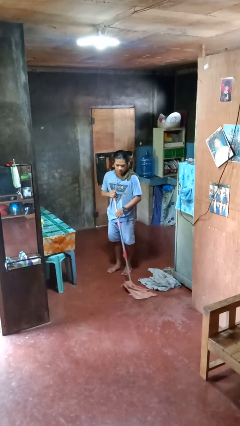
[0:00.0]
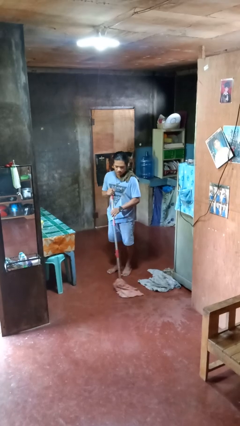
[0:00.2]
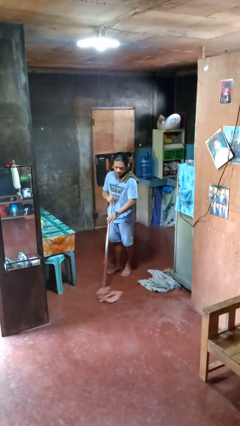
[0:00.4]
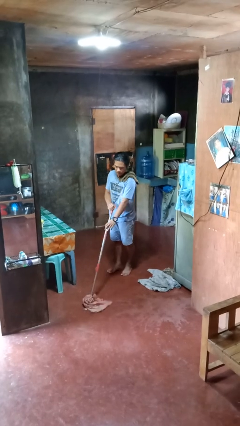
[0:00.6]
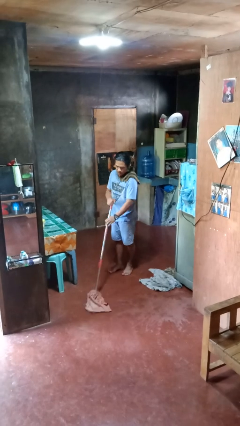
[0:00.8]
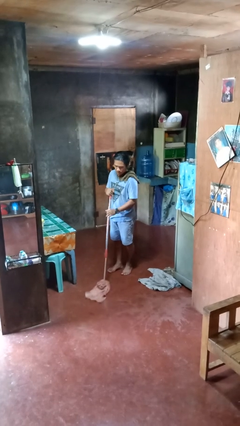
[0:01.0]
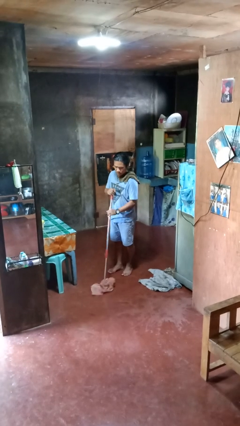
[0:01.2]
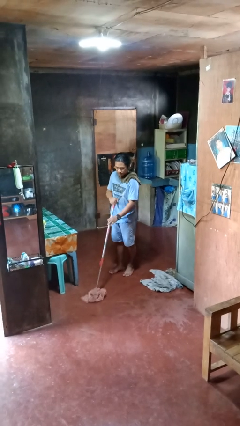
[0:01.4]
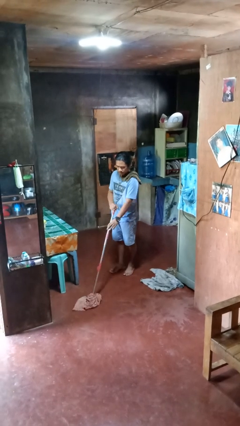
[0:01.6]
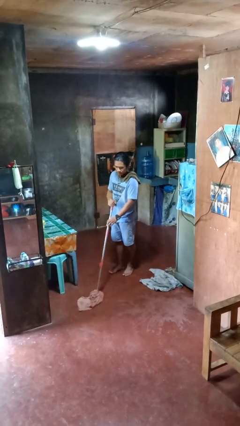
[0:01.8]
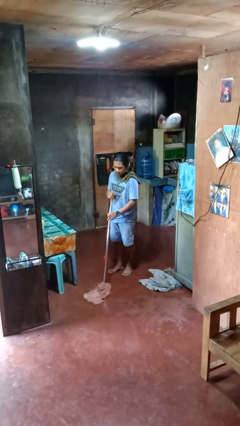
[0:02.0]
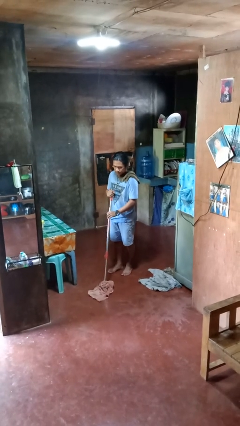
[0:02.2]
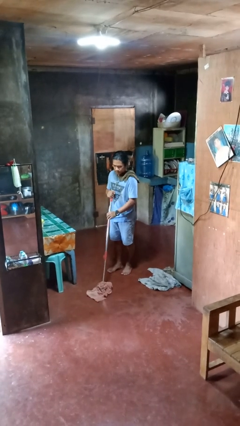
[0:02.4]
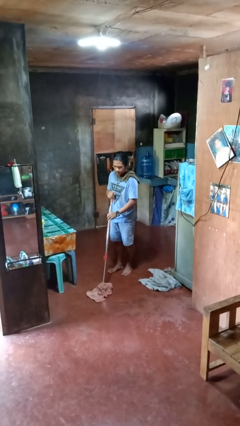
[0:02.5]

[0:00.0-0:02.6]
person mops

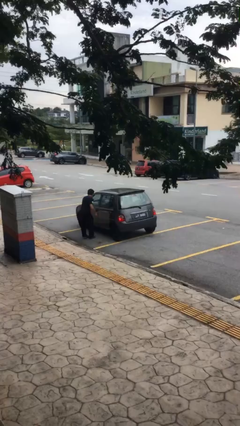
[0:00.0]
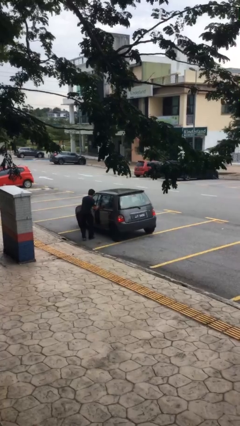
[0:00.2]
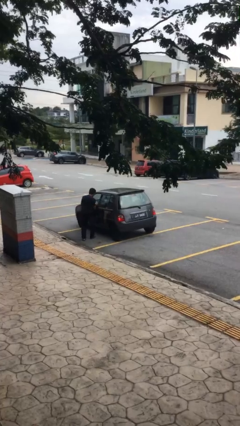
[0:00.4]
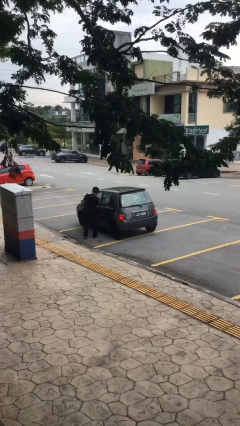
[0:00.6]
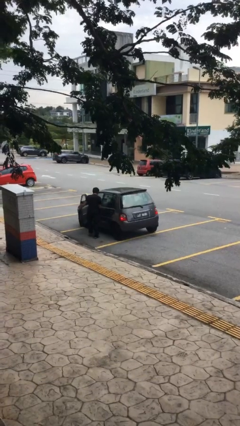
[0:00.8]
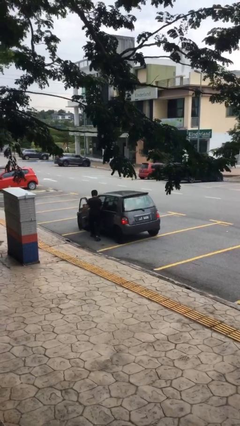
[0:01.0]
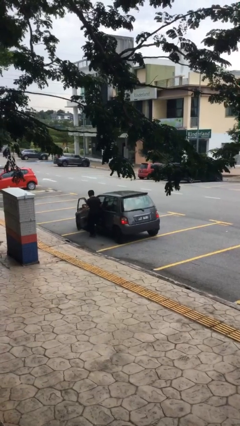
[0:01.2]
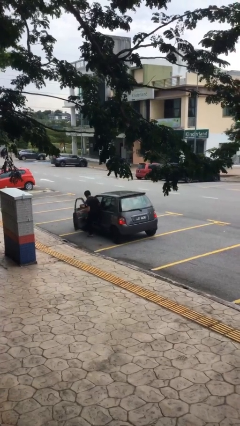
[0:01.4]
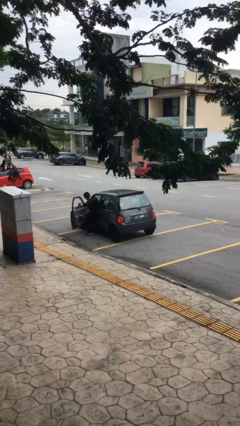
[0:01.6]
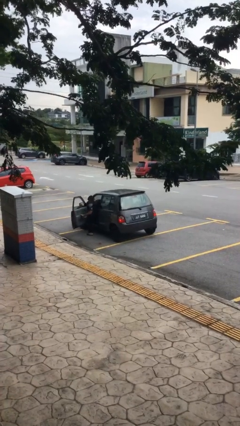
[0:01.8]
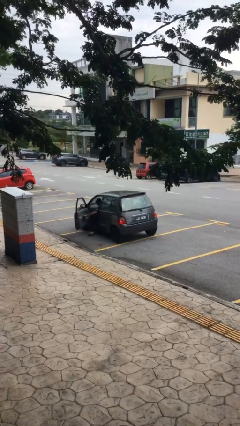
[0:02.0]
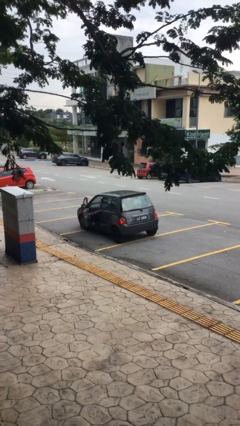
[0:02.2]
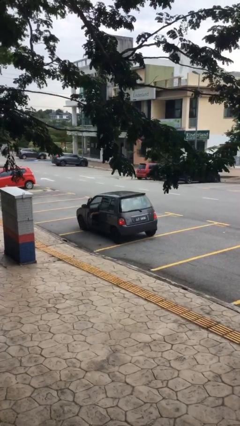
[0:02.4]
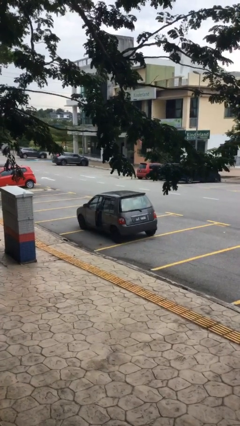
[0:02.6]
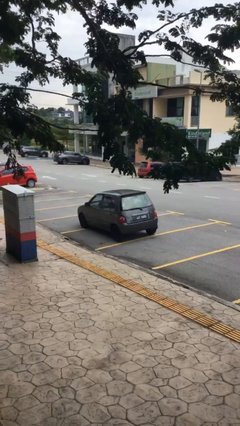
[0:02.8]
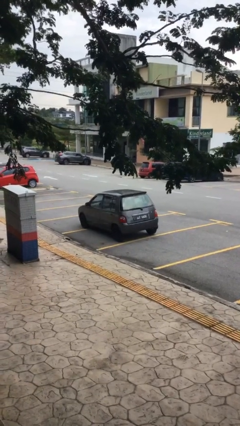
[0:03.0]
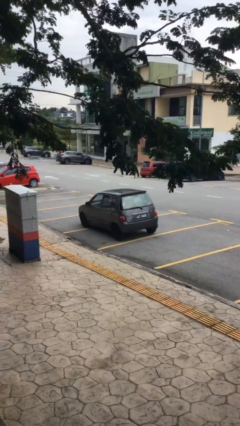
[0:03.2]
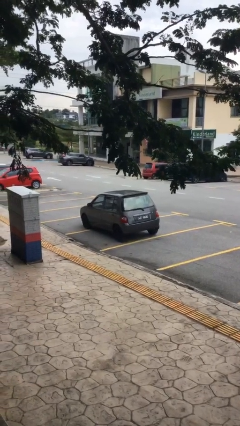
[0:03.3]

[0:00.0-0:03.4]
car picks up person

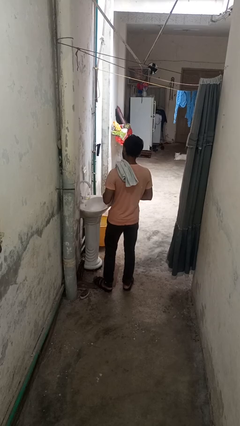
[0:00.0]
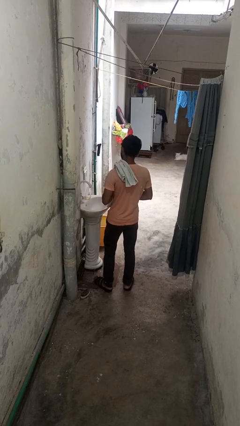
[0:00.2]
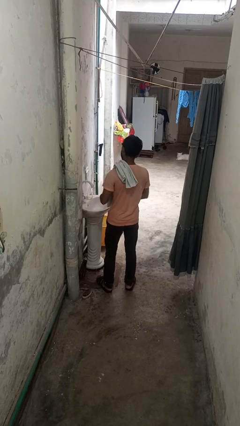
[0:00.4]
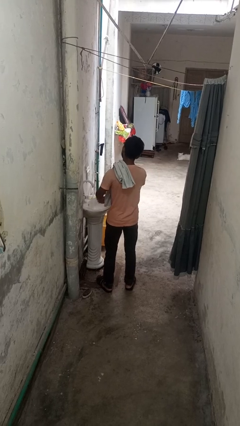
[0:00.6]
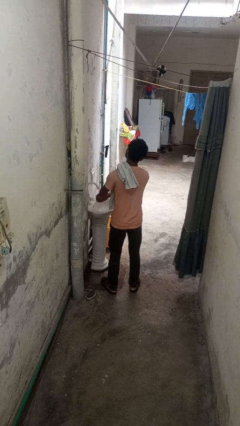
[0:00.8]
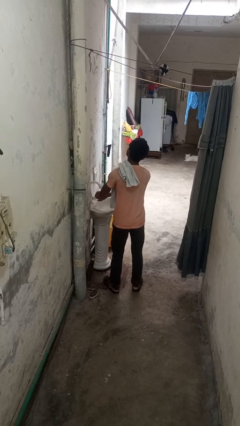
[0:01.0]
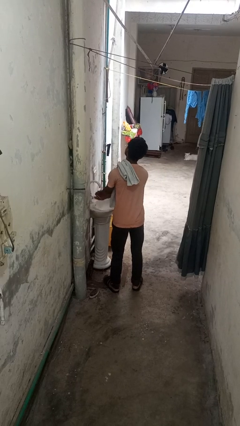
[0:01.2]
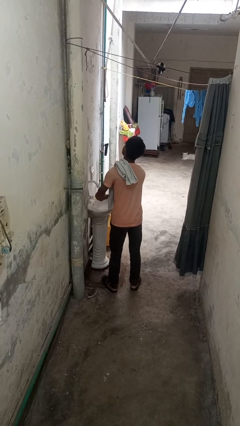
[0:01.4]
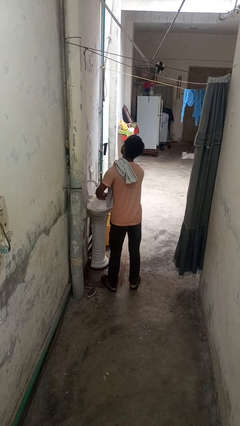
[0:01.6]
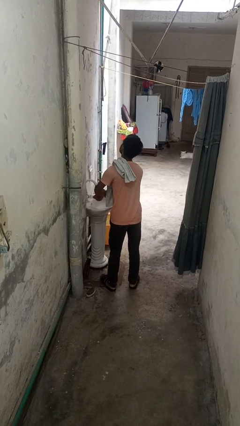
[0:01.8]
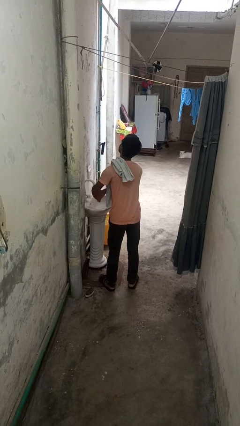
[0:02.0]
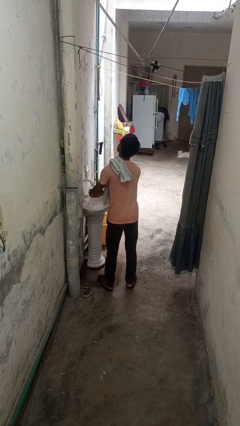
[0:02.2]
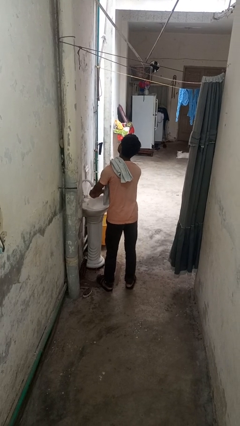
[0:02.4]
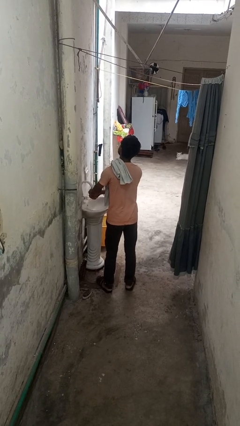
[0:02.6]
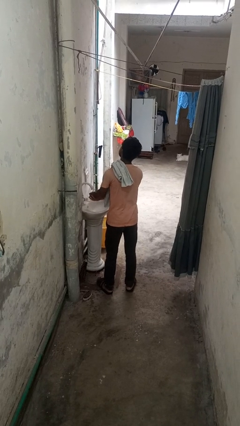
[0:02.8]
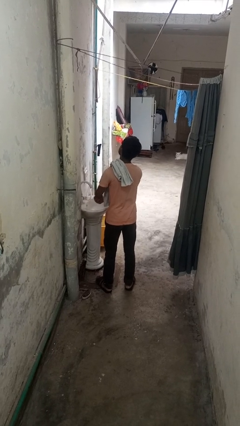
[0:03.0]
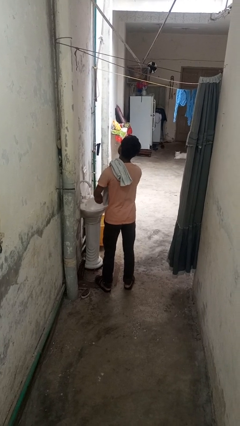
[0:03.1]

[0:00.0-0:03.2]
person washes hands

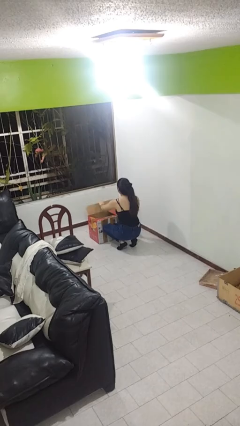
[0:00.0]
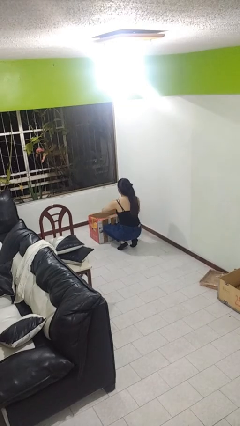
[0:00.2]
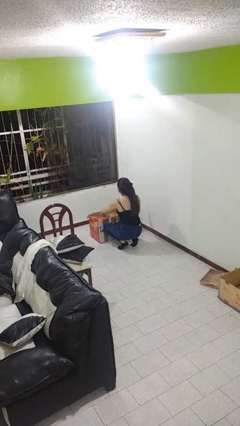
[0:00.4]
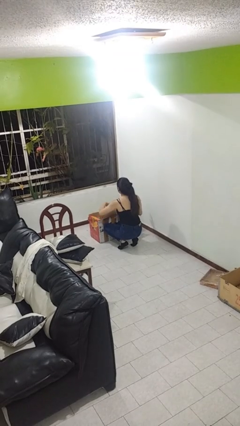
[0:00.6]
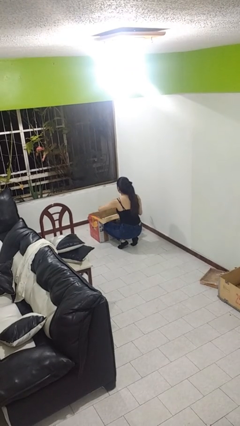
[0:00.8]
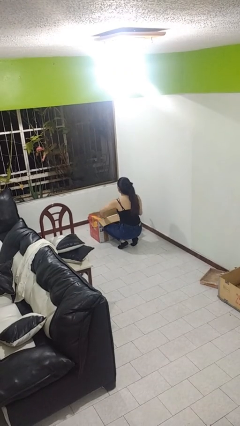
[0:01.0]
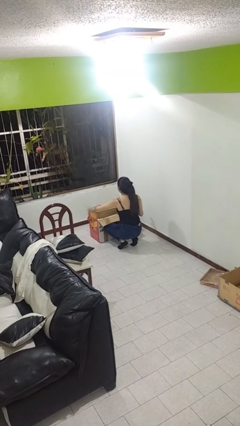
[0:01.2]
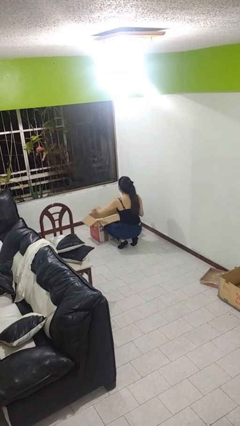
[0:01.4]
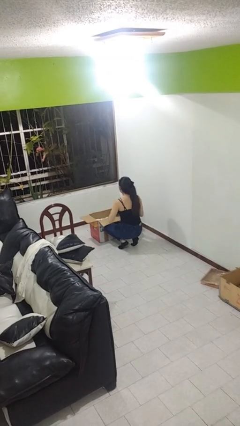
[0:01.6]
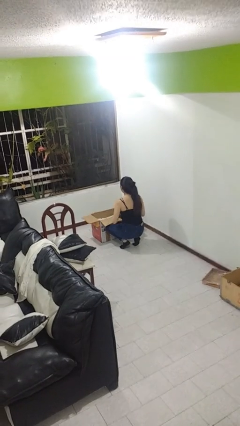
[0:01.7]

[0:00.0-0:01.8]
person opens box

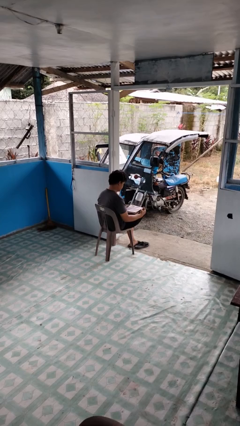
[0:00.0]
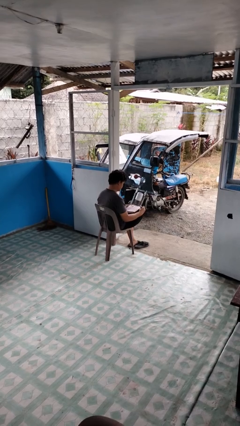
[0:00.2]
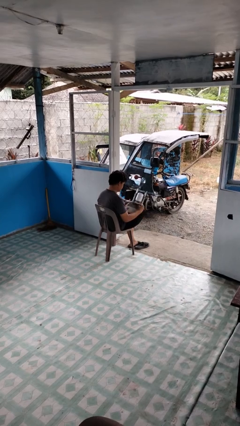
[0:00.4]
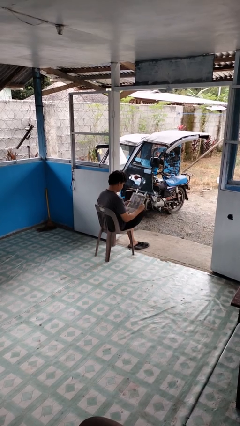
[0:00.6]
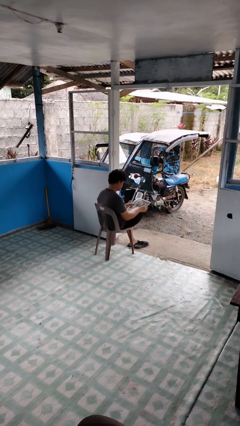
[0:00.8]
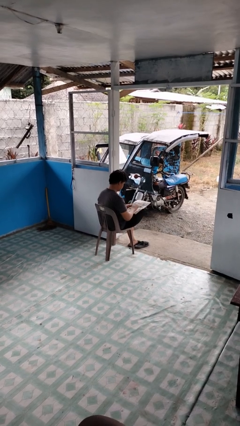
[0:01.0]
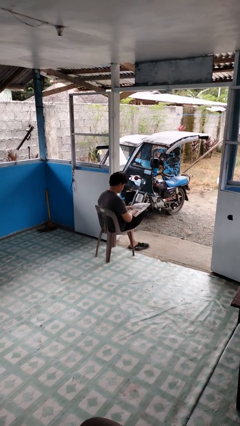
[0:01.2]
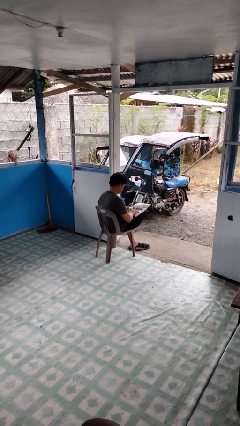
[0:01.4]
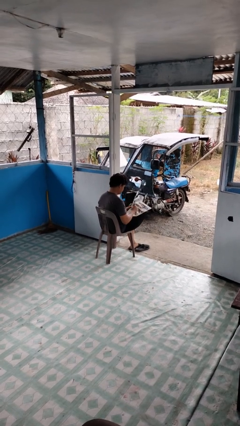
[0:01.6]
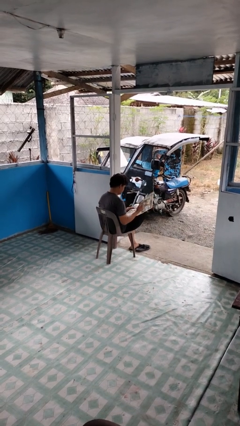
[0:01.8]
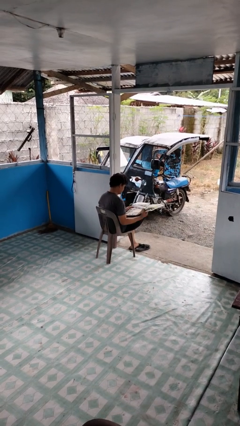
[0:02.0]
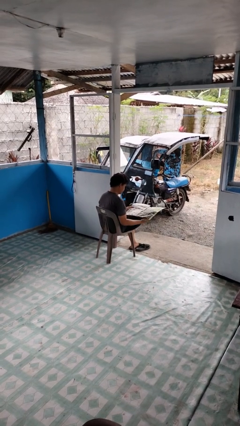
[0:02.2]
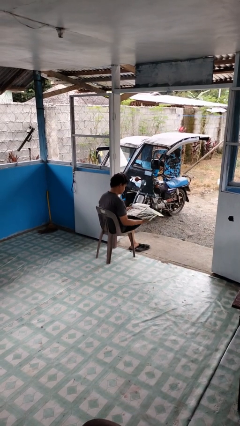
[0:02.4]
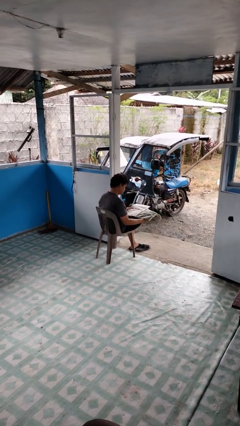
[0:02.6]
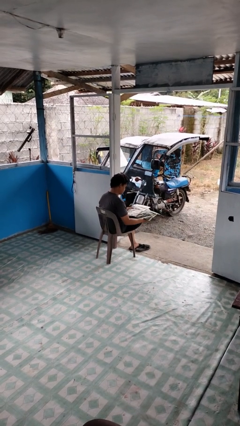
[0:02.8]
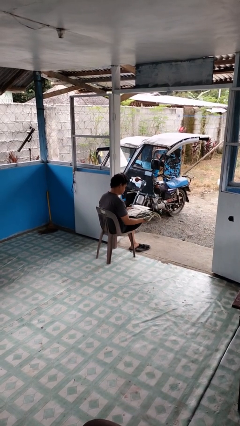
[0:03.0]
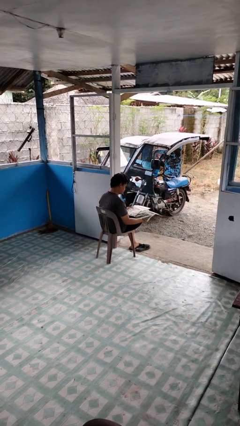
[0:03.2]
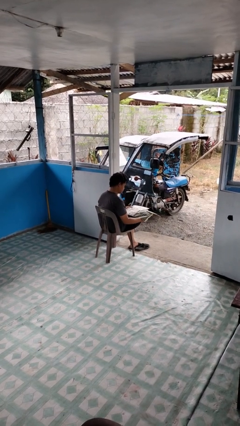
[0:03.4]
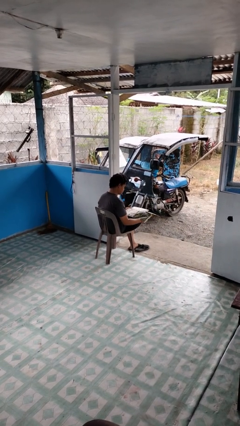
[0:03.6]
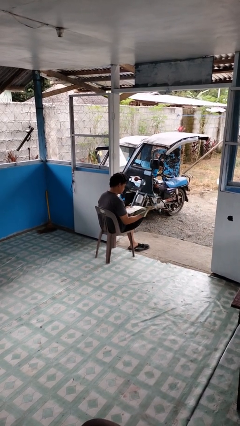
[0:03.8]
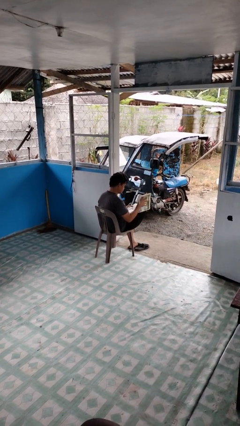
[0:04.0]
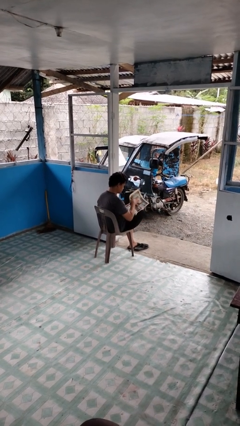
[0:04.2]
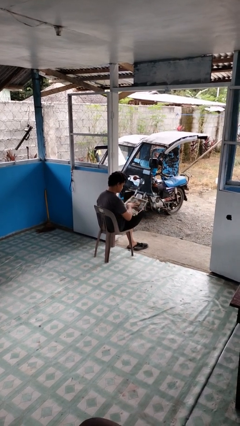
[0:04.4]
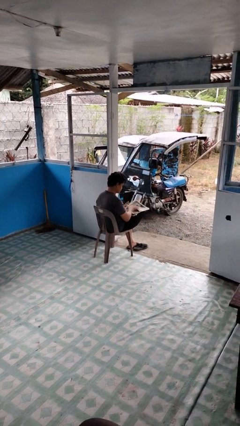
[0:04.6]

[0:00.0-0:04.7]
person reads newspaper

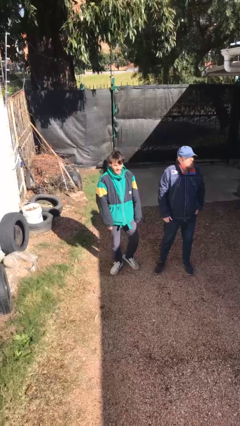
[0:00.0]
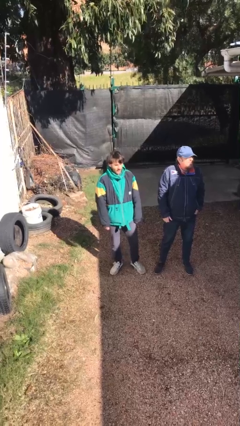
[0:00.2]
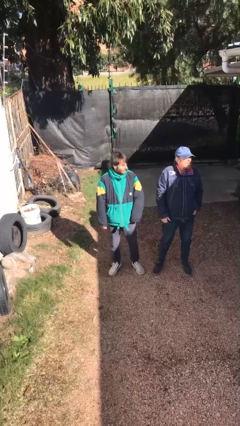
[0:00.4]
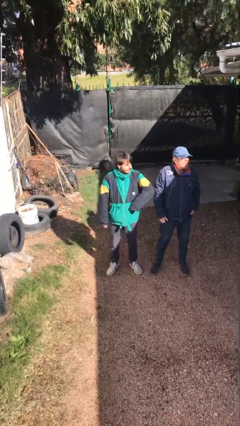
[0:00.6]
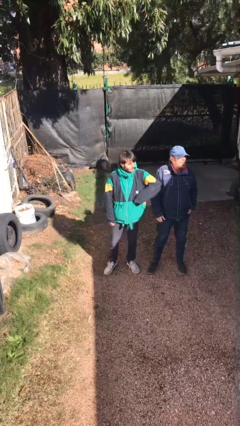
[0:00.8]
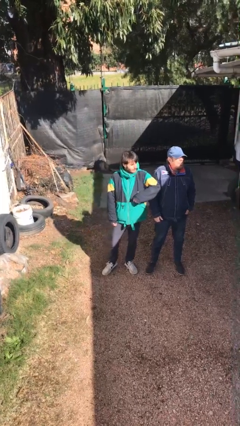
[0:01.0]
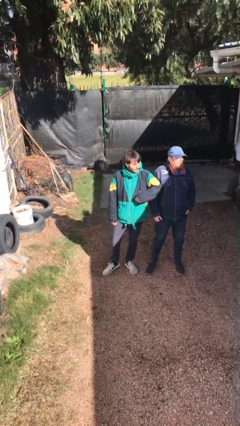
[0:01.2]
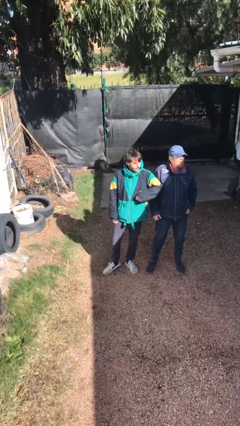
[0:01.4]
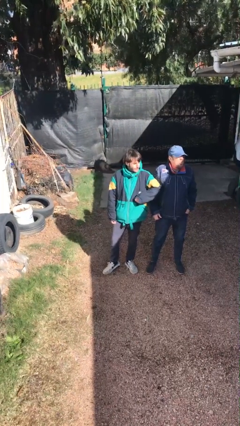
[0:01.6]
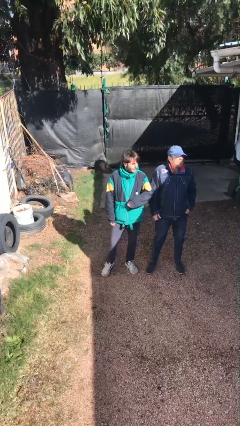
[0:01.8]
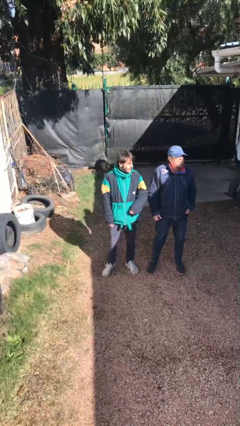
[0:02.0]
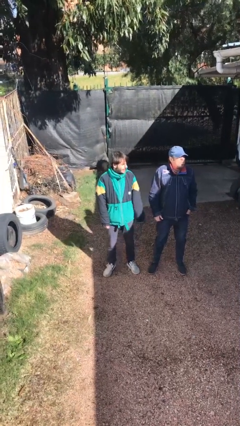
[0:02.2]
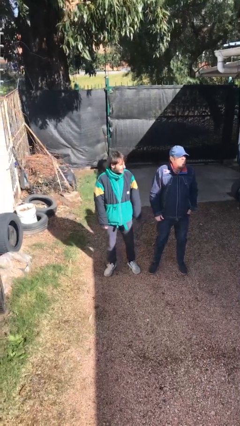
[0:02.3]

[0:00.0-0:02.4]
person nudges person with elbow
